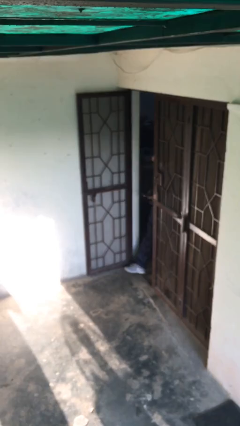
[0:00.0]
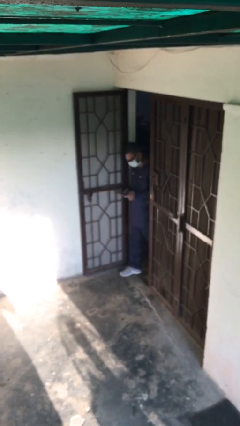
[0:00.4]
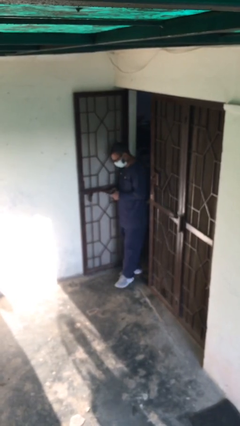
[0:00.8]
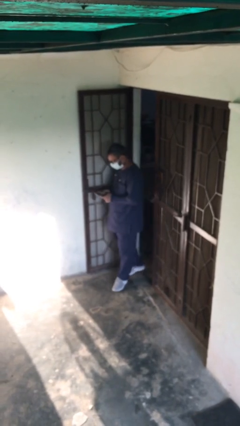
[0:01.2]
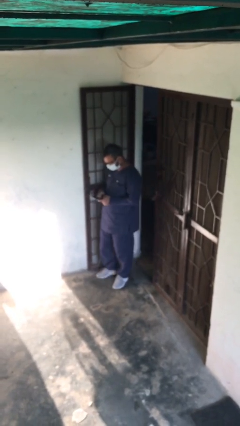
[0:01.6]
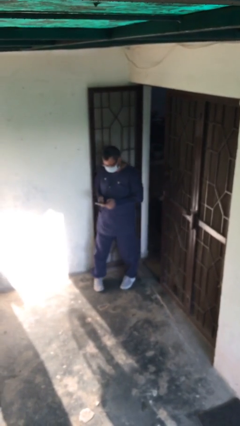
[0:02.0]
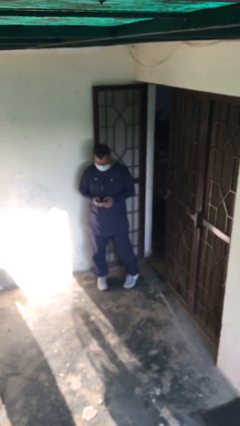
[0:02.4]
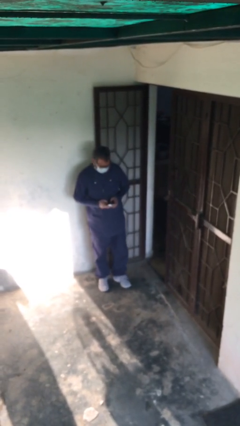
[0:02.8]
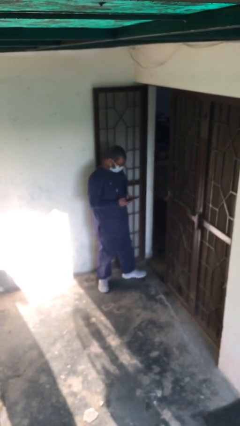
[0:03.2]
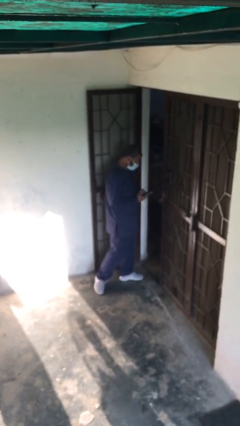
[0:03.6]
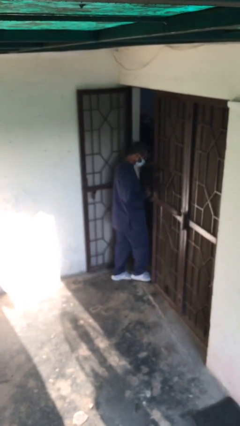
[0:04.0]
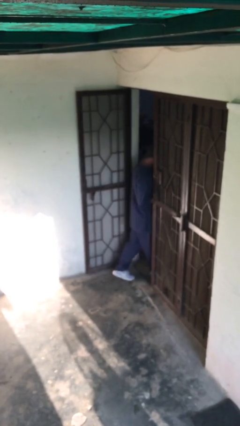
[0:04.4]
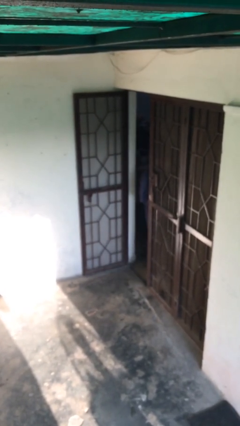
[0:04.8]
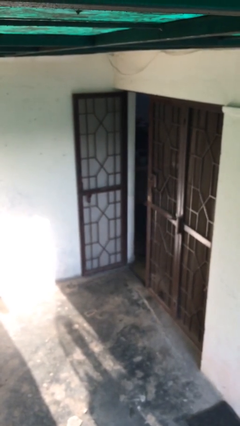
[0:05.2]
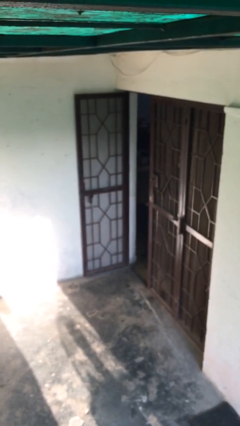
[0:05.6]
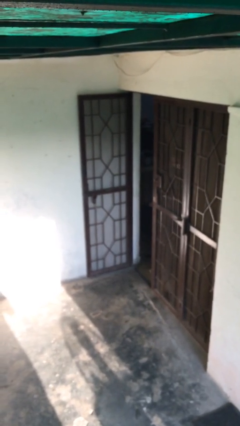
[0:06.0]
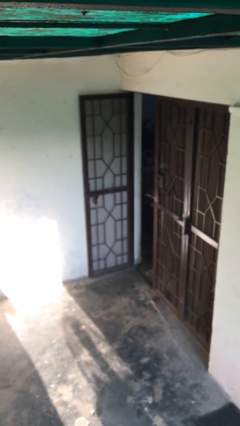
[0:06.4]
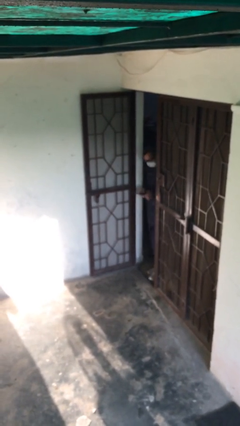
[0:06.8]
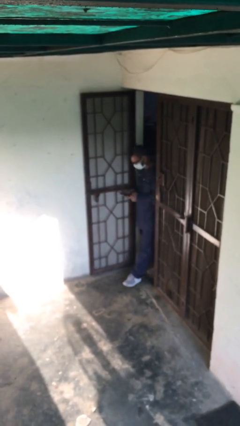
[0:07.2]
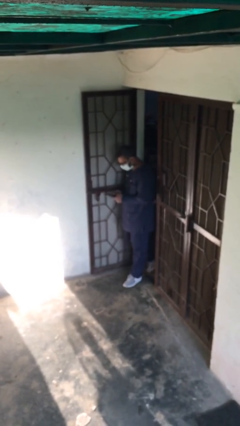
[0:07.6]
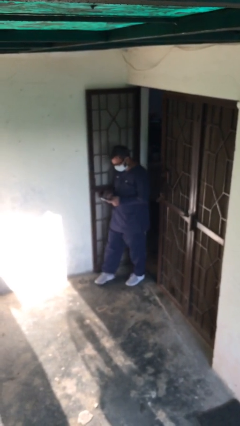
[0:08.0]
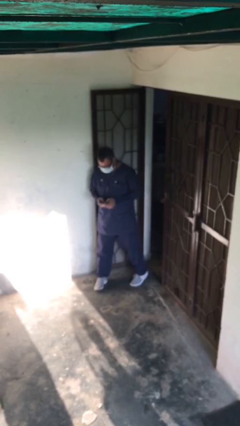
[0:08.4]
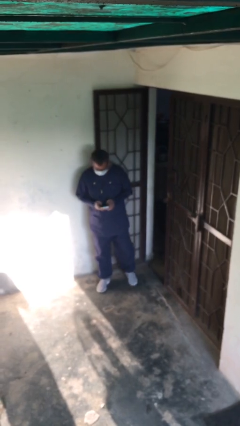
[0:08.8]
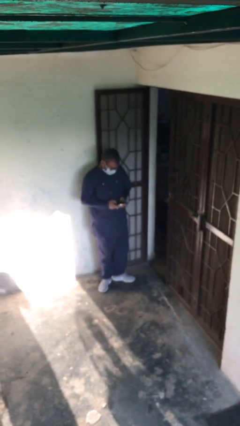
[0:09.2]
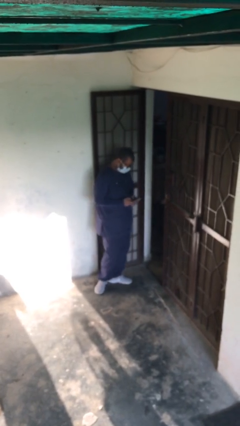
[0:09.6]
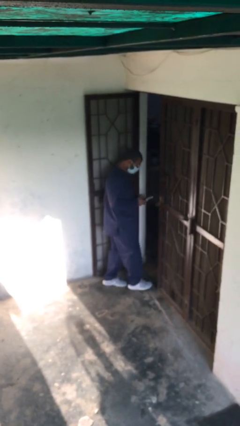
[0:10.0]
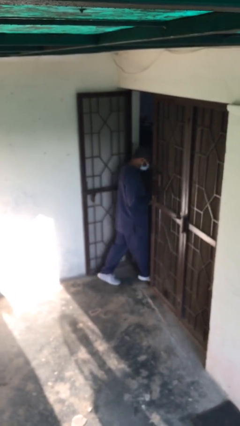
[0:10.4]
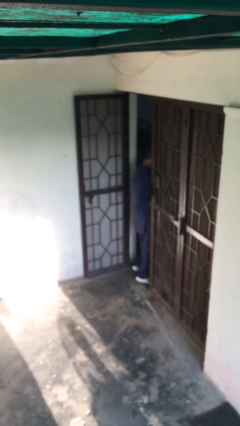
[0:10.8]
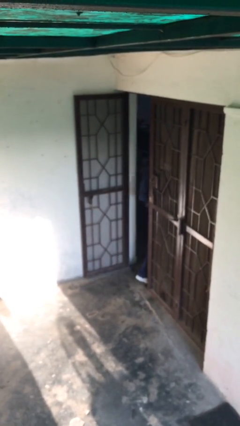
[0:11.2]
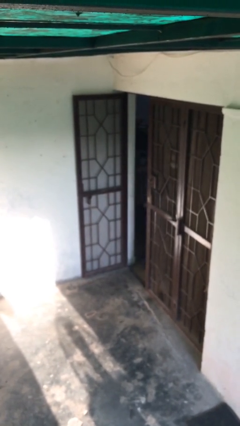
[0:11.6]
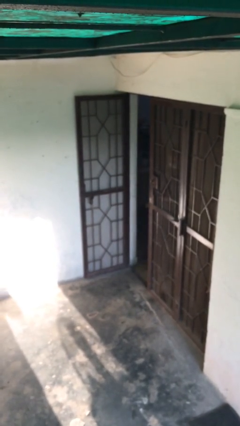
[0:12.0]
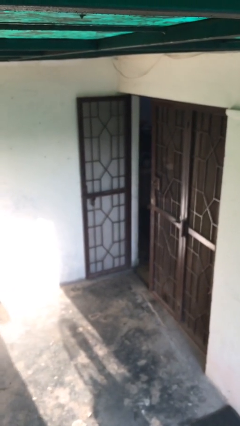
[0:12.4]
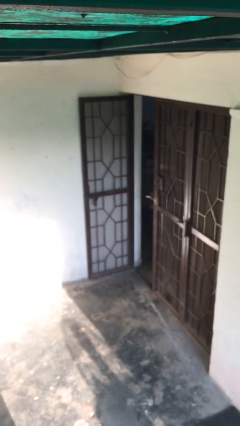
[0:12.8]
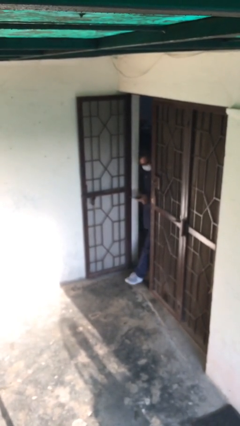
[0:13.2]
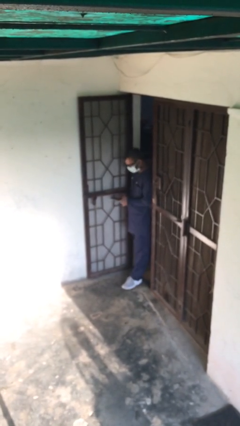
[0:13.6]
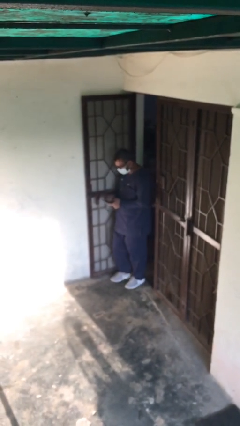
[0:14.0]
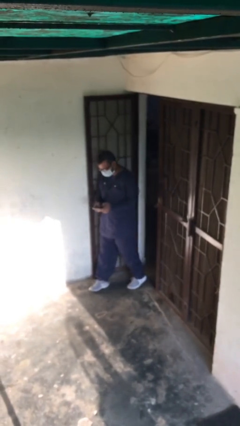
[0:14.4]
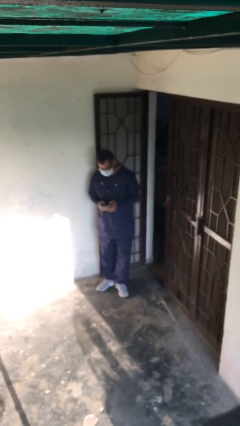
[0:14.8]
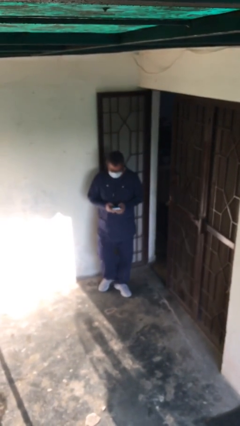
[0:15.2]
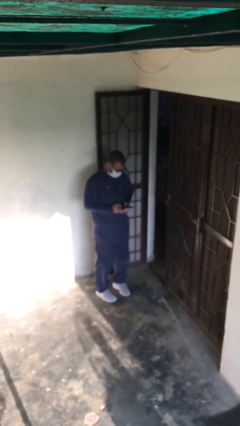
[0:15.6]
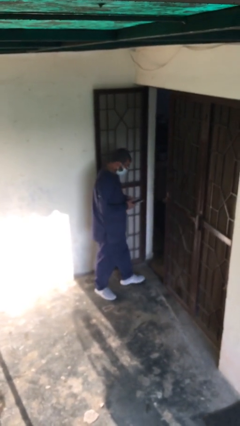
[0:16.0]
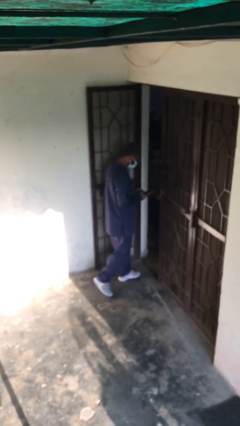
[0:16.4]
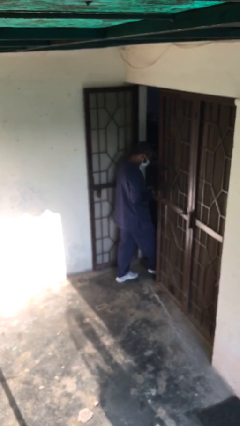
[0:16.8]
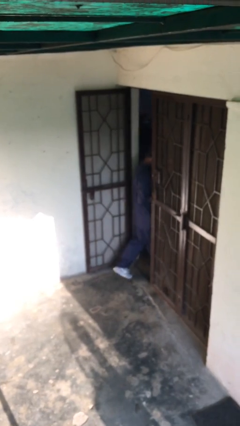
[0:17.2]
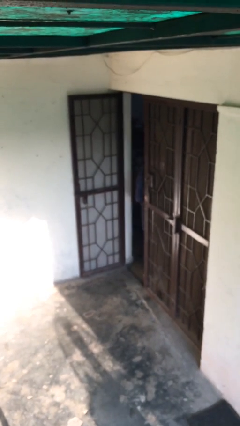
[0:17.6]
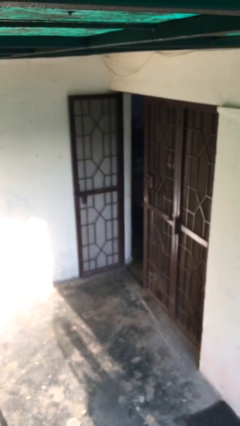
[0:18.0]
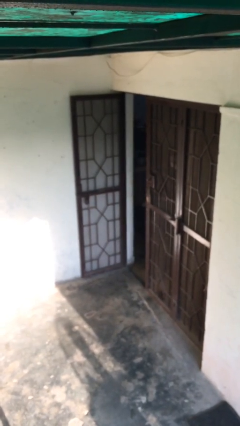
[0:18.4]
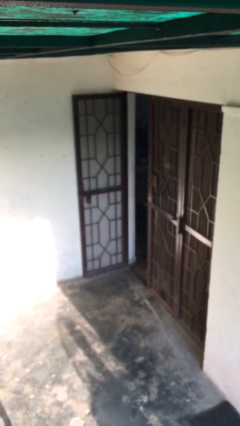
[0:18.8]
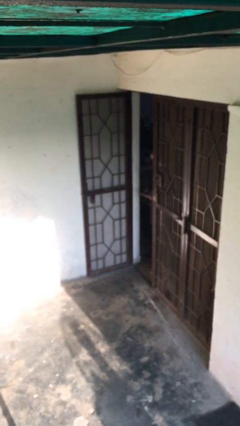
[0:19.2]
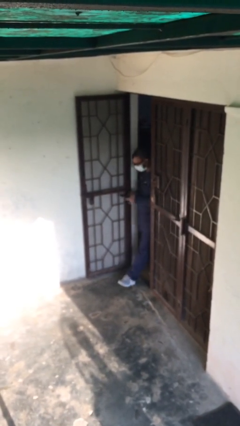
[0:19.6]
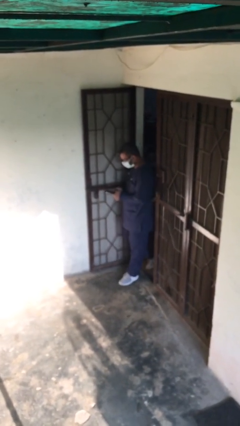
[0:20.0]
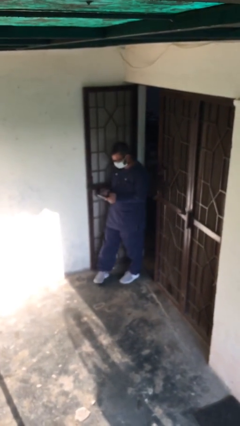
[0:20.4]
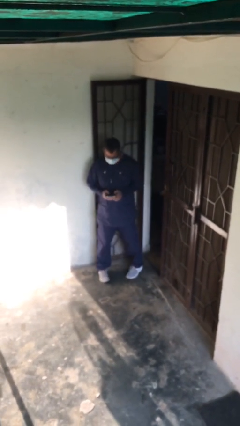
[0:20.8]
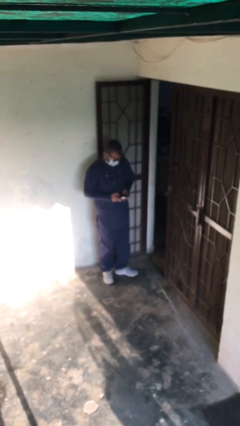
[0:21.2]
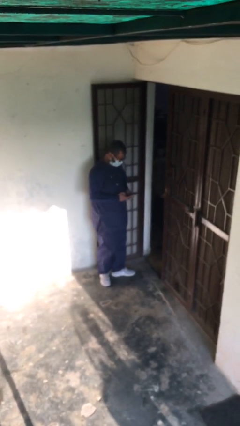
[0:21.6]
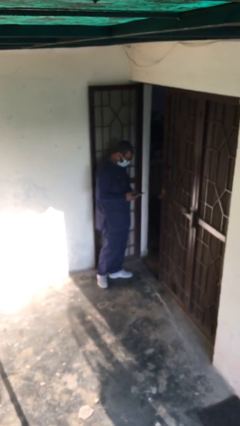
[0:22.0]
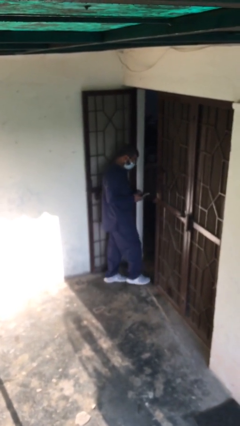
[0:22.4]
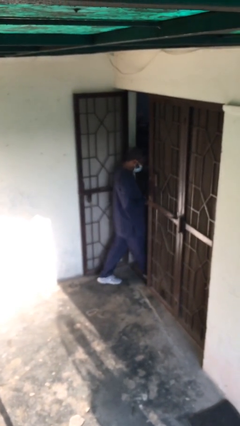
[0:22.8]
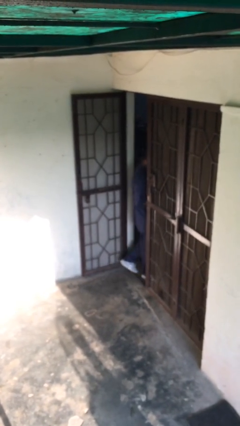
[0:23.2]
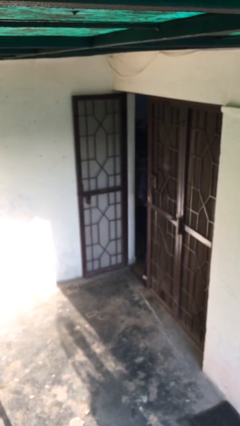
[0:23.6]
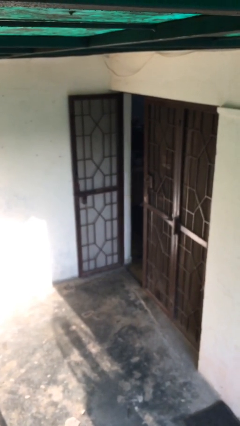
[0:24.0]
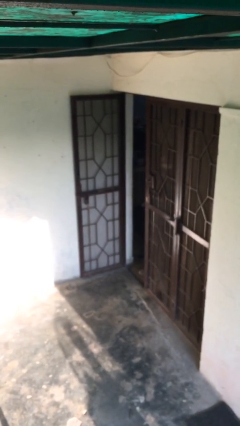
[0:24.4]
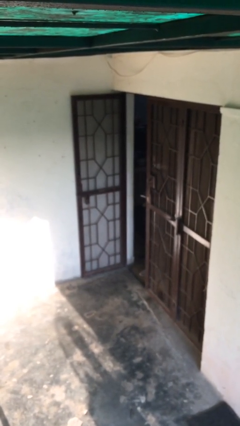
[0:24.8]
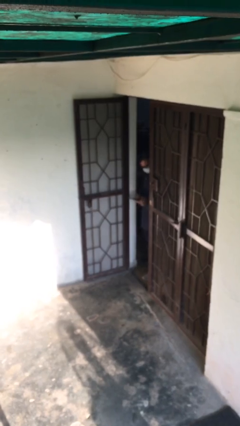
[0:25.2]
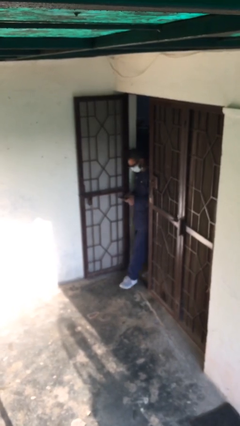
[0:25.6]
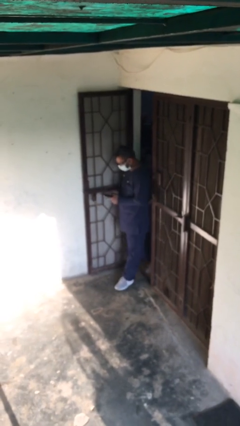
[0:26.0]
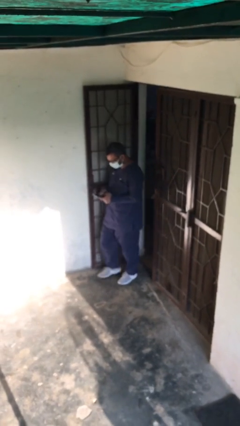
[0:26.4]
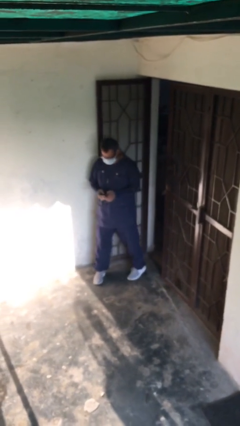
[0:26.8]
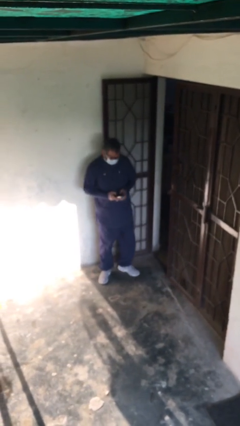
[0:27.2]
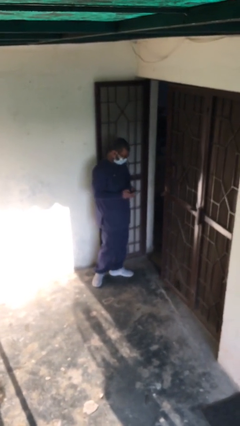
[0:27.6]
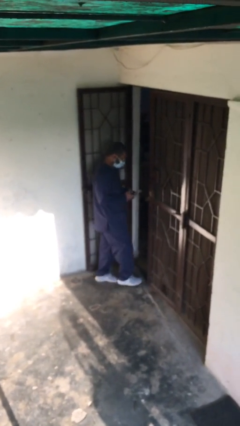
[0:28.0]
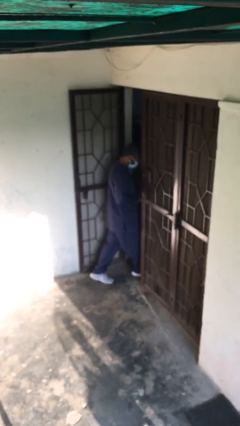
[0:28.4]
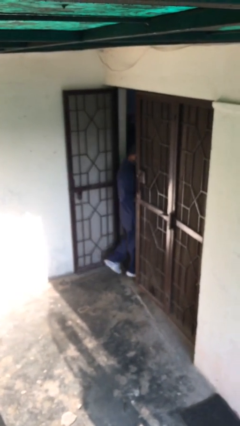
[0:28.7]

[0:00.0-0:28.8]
person texts on phone

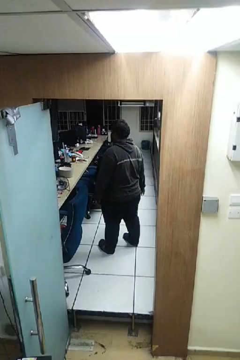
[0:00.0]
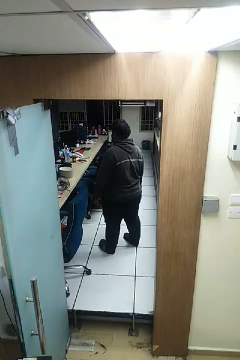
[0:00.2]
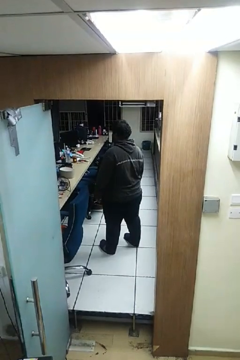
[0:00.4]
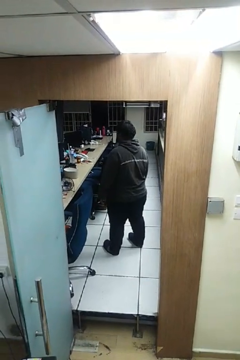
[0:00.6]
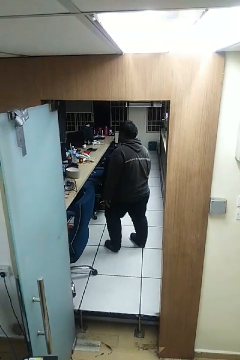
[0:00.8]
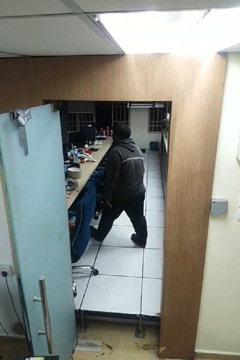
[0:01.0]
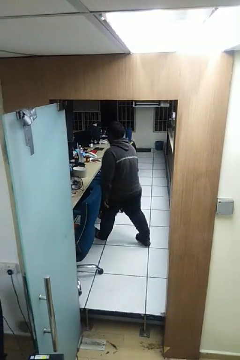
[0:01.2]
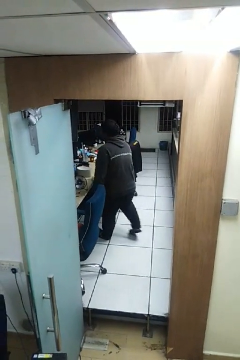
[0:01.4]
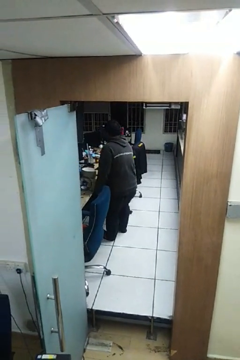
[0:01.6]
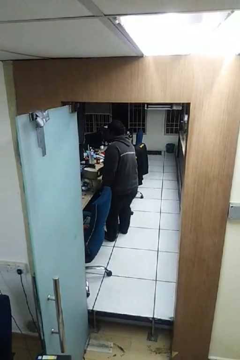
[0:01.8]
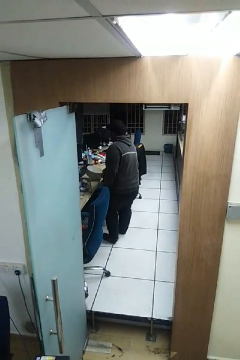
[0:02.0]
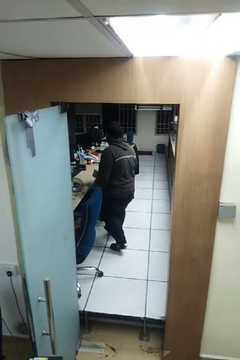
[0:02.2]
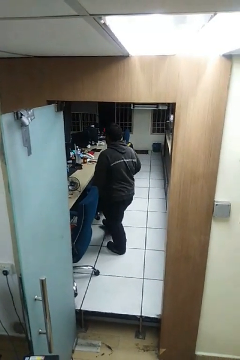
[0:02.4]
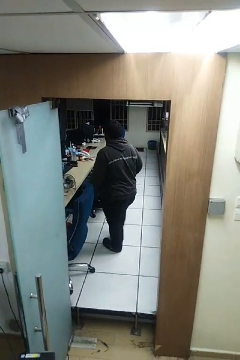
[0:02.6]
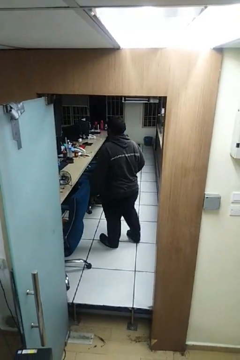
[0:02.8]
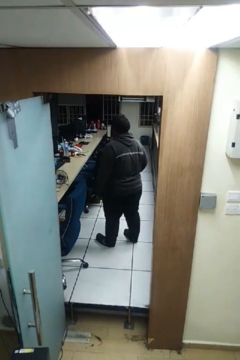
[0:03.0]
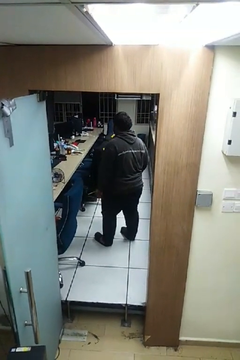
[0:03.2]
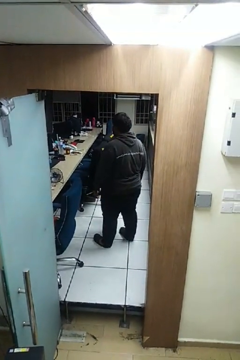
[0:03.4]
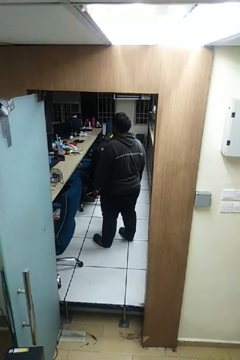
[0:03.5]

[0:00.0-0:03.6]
person picks up object from table

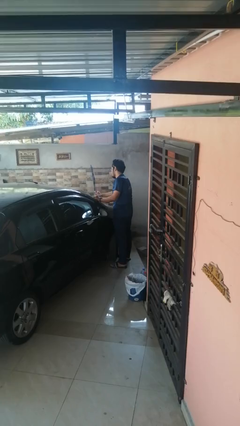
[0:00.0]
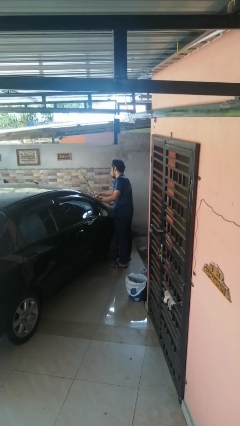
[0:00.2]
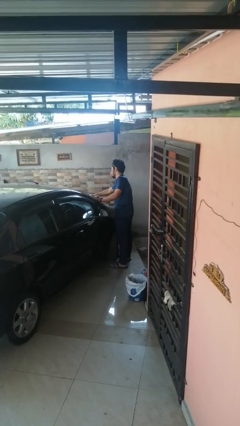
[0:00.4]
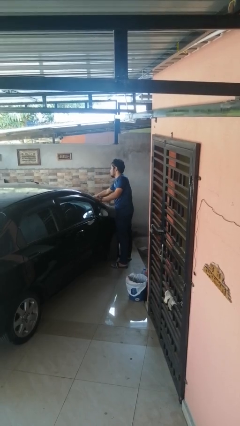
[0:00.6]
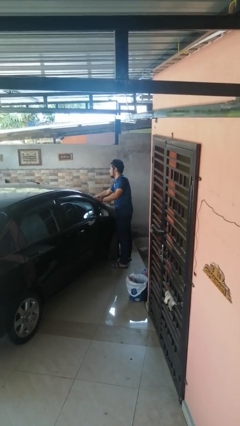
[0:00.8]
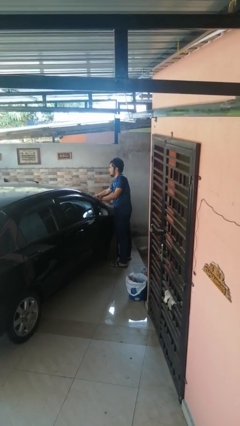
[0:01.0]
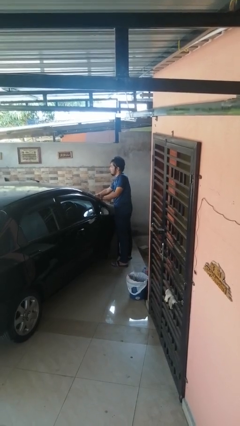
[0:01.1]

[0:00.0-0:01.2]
person flips down car wipers
